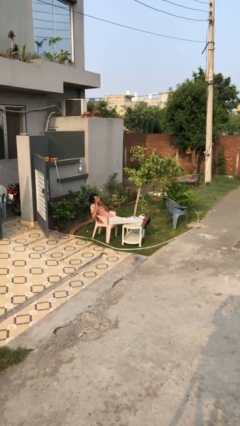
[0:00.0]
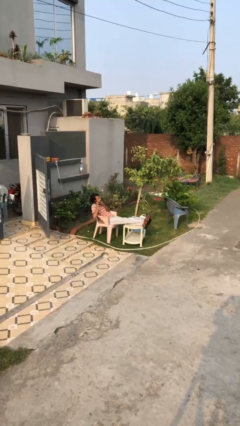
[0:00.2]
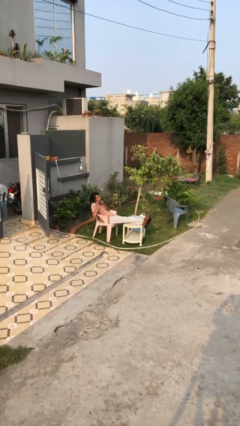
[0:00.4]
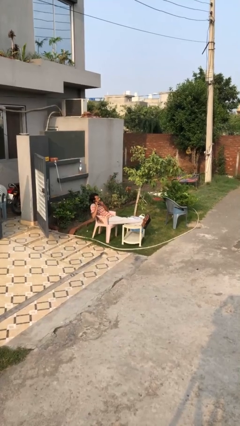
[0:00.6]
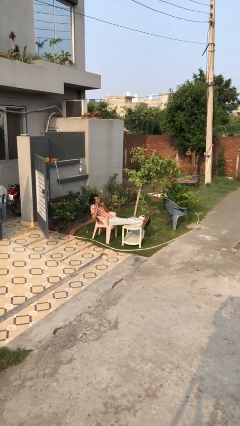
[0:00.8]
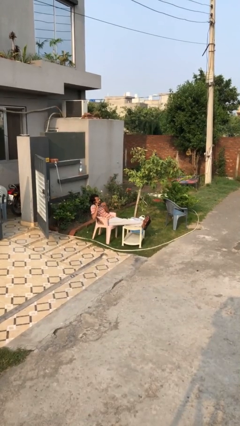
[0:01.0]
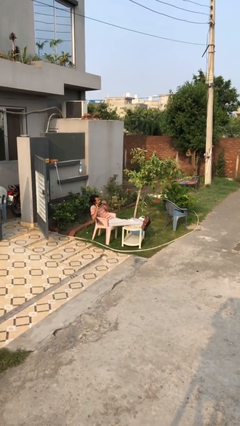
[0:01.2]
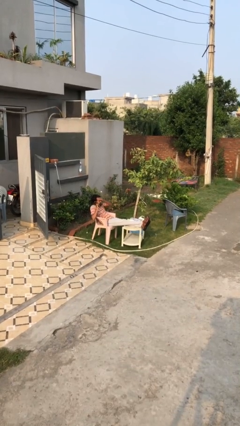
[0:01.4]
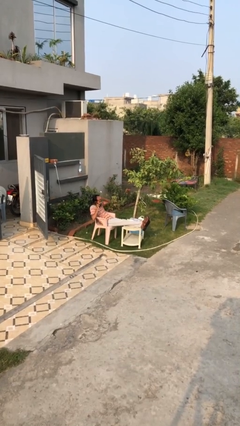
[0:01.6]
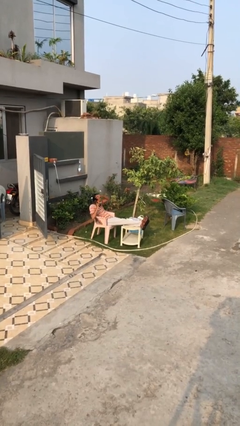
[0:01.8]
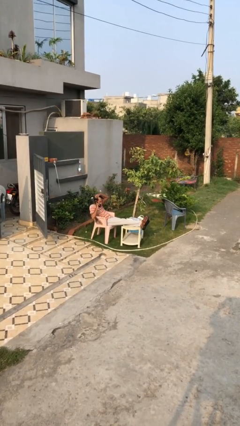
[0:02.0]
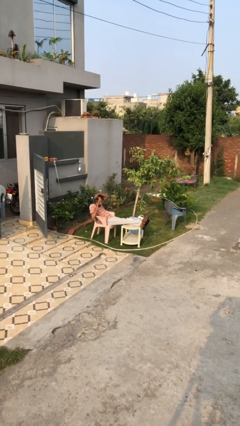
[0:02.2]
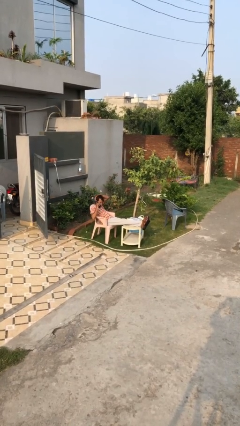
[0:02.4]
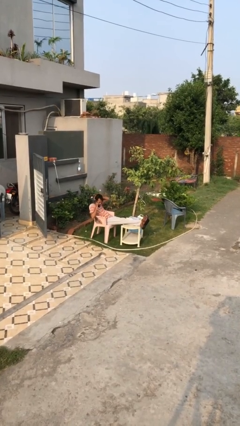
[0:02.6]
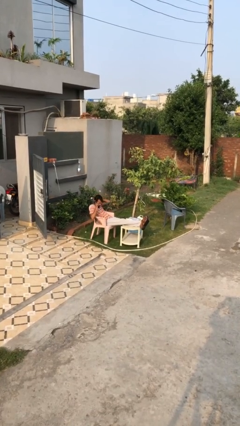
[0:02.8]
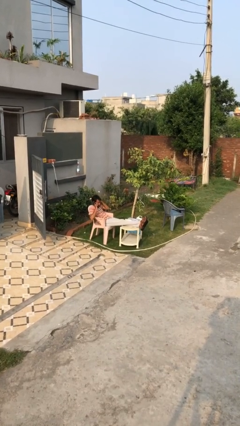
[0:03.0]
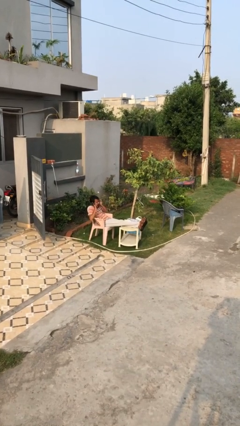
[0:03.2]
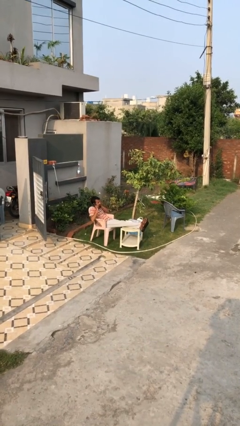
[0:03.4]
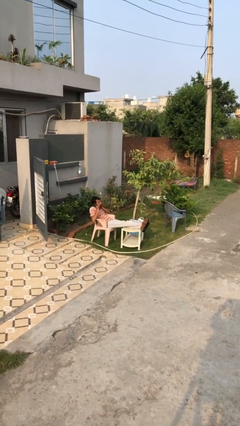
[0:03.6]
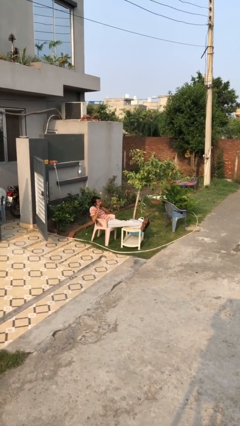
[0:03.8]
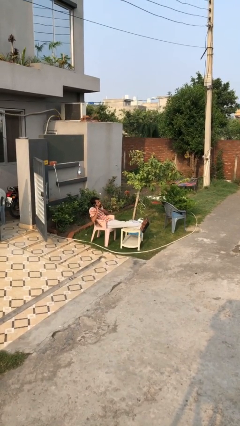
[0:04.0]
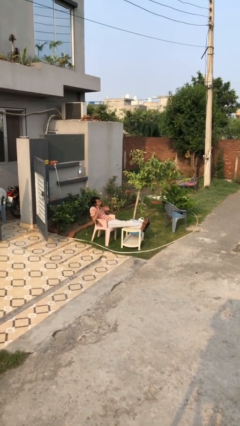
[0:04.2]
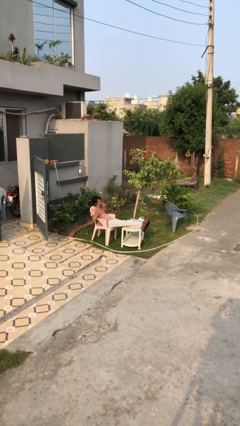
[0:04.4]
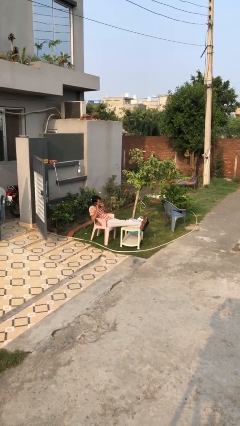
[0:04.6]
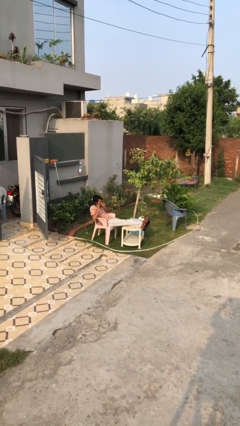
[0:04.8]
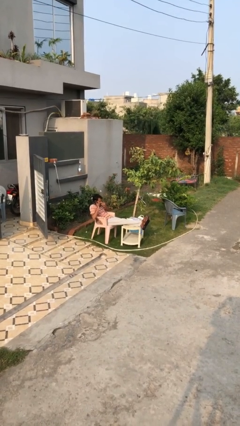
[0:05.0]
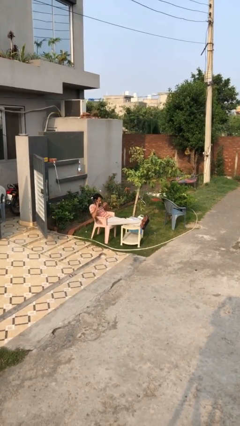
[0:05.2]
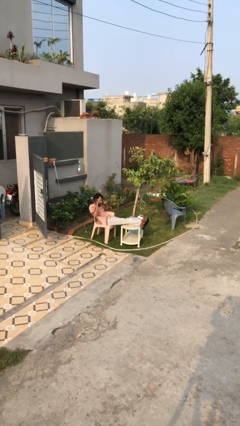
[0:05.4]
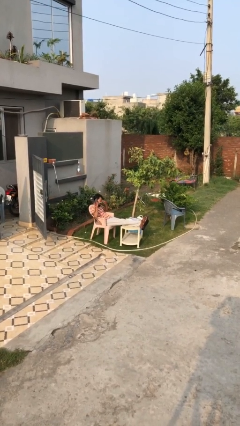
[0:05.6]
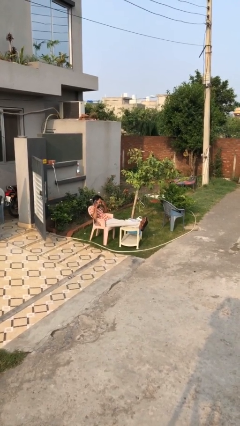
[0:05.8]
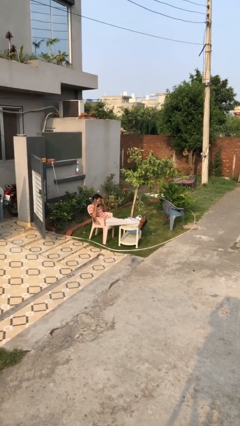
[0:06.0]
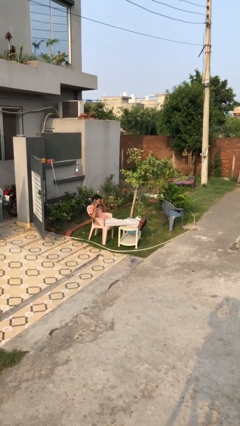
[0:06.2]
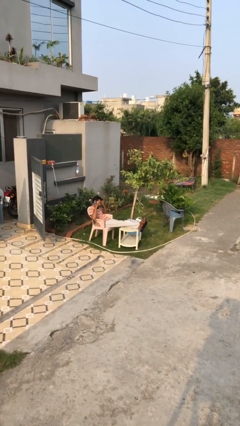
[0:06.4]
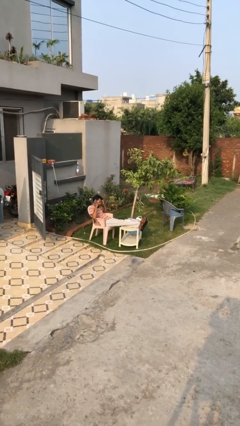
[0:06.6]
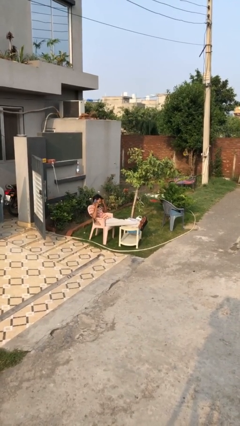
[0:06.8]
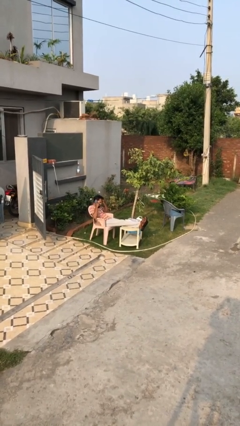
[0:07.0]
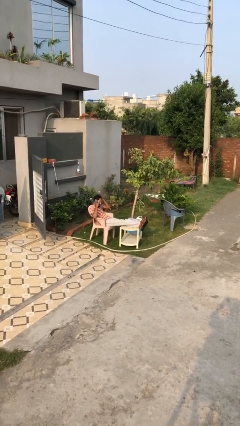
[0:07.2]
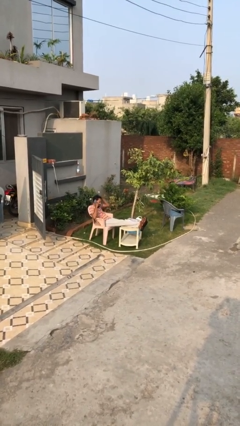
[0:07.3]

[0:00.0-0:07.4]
person talks on phone

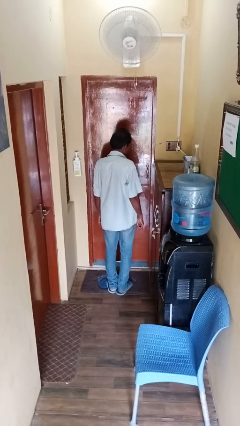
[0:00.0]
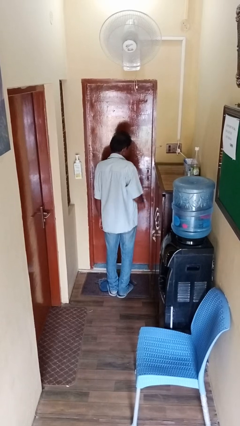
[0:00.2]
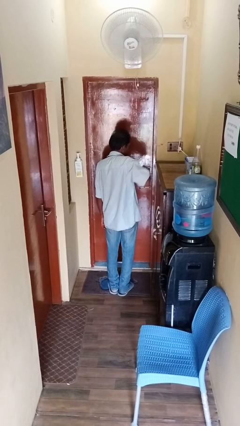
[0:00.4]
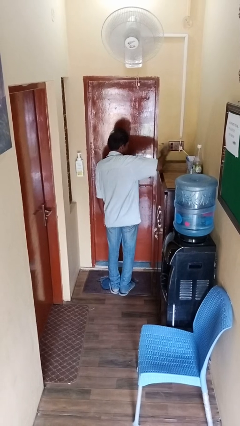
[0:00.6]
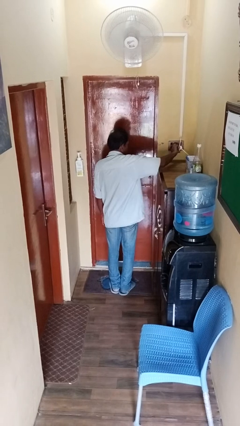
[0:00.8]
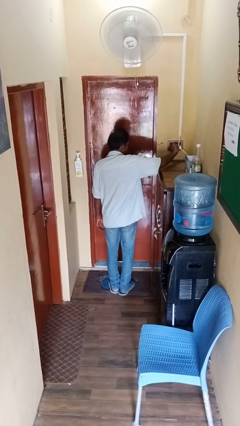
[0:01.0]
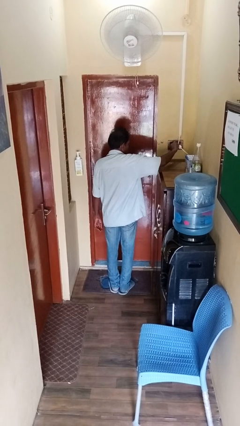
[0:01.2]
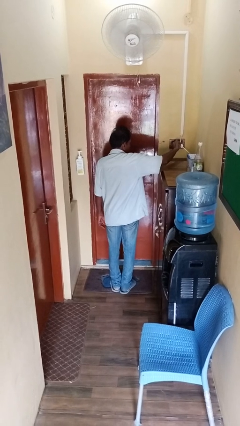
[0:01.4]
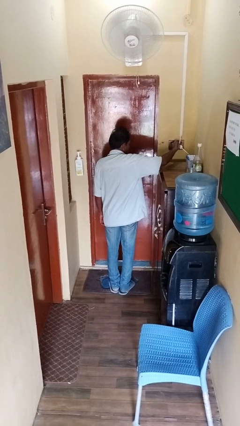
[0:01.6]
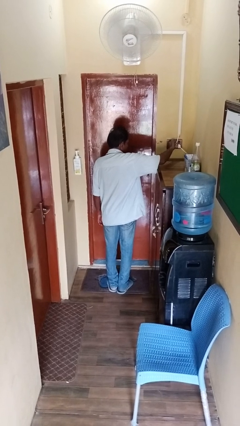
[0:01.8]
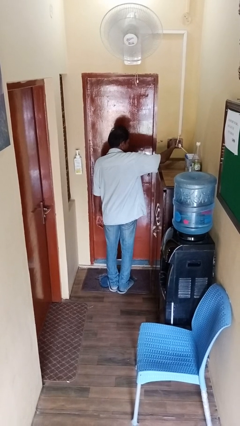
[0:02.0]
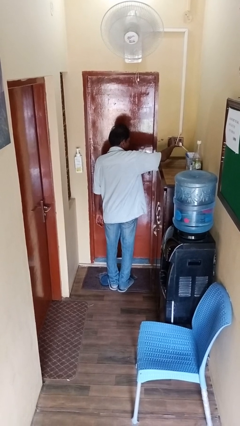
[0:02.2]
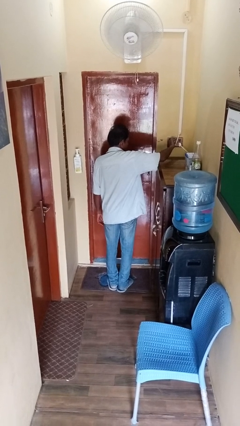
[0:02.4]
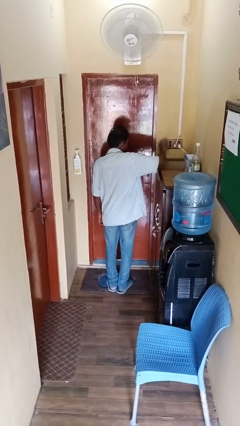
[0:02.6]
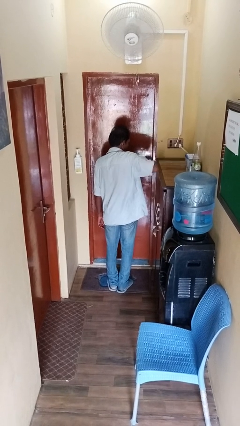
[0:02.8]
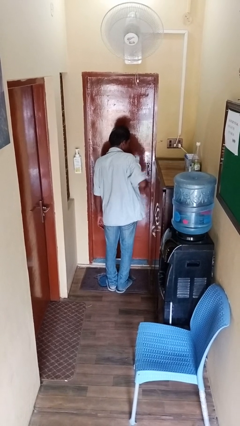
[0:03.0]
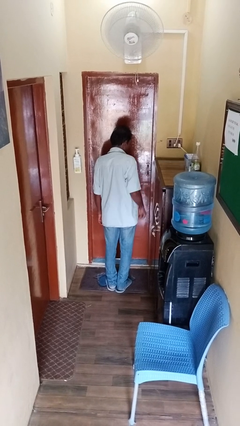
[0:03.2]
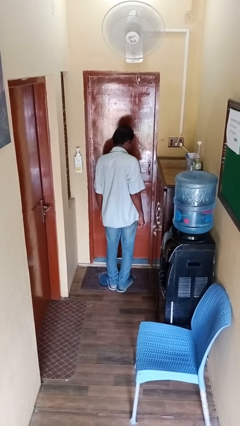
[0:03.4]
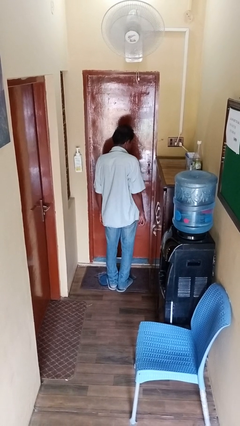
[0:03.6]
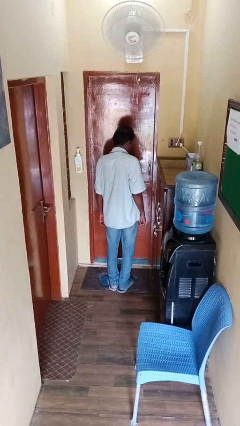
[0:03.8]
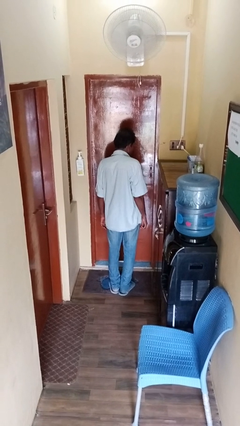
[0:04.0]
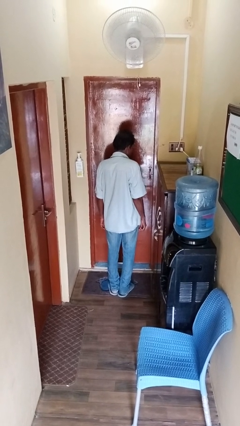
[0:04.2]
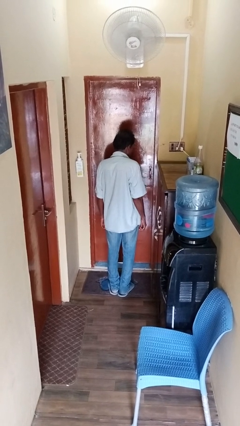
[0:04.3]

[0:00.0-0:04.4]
person turns on fan

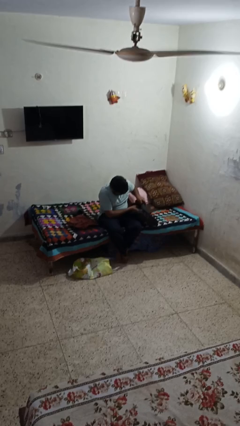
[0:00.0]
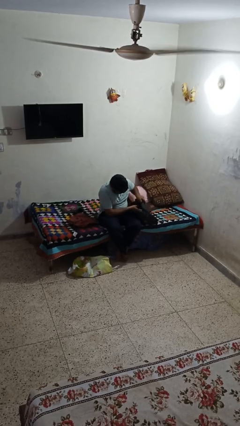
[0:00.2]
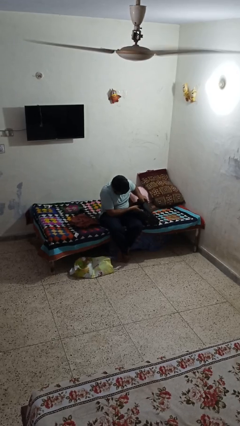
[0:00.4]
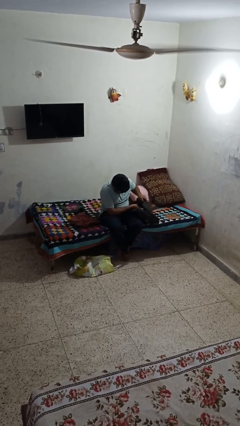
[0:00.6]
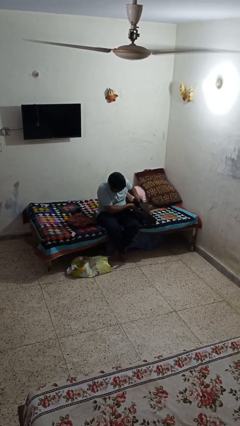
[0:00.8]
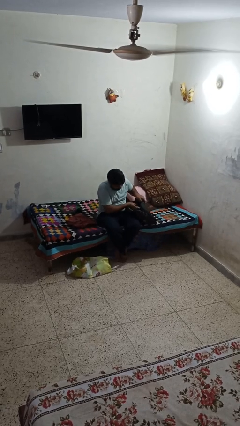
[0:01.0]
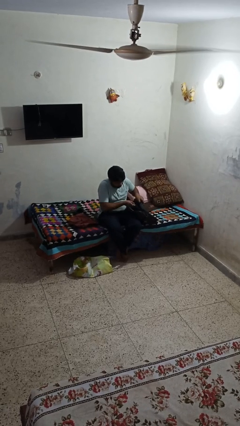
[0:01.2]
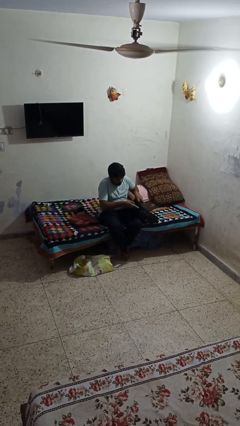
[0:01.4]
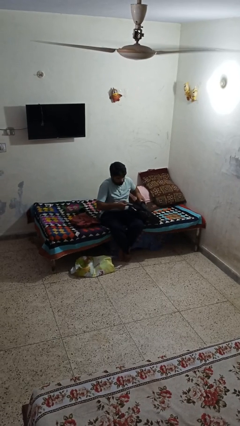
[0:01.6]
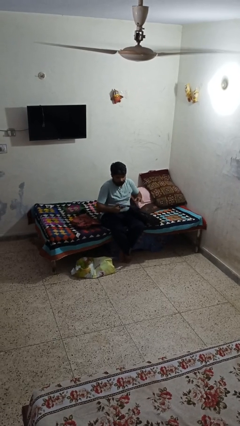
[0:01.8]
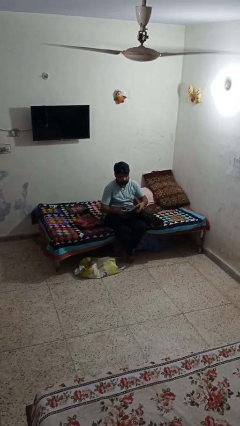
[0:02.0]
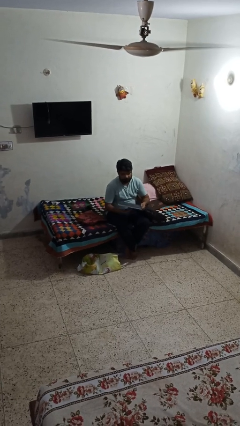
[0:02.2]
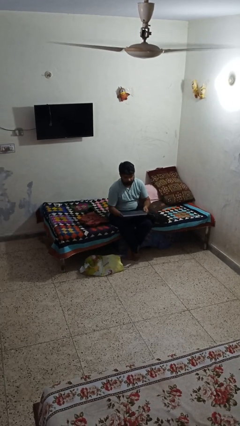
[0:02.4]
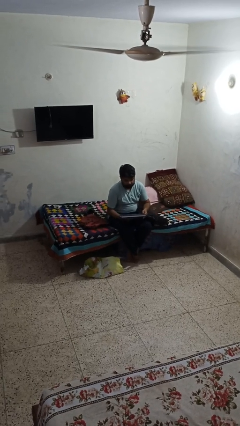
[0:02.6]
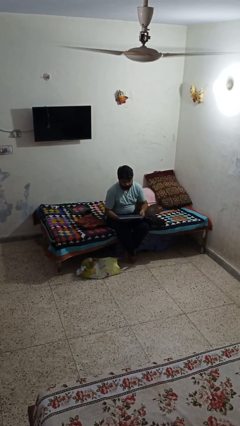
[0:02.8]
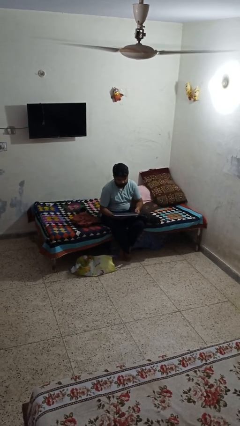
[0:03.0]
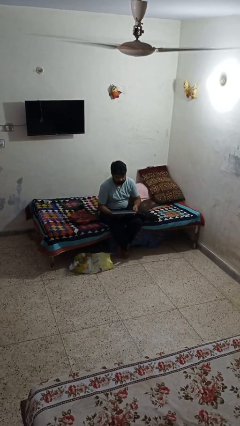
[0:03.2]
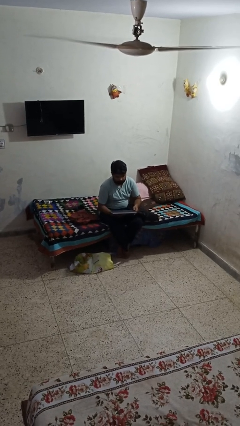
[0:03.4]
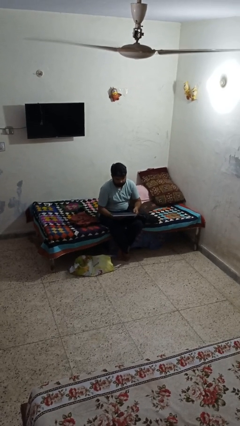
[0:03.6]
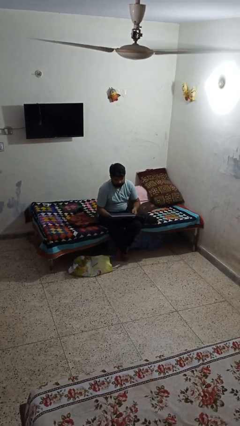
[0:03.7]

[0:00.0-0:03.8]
person takes object from backpack

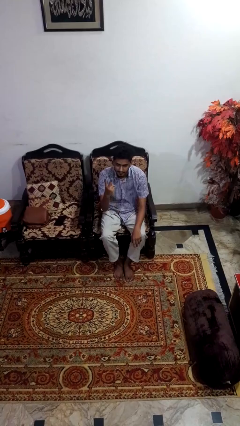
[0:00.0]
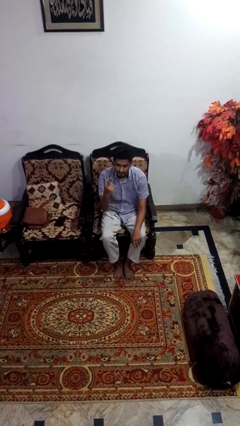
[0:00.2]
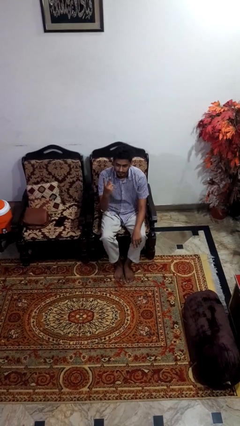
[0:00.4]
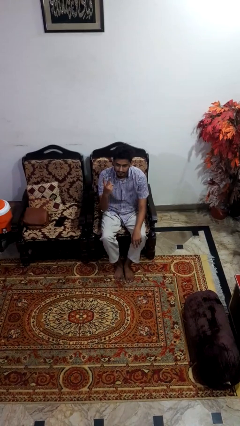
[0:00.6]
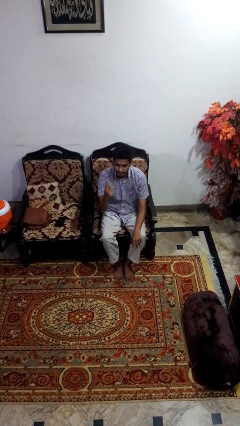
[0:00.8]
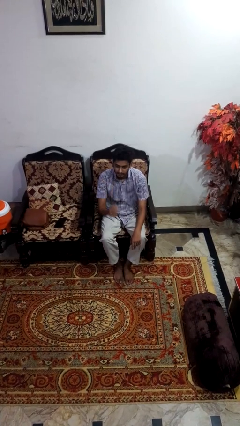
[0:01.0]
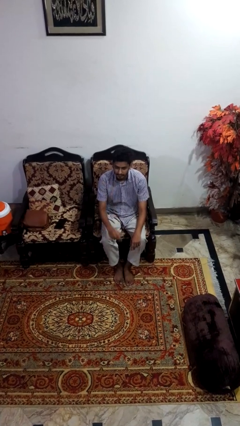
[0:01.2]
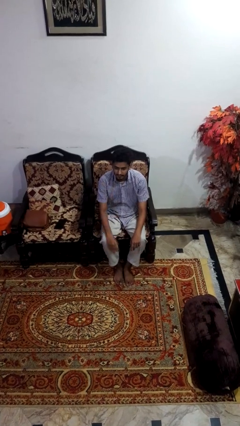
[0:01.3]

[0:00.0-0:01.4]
person gestures peace

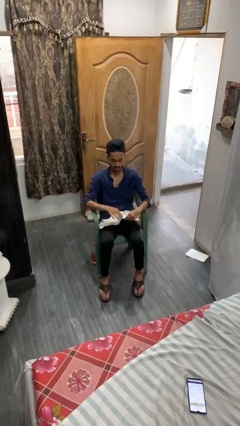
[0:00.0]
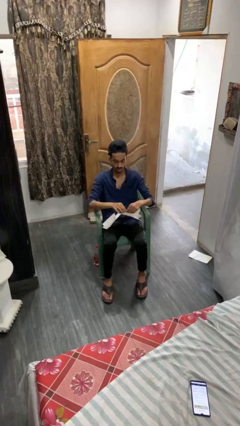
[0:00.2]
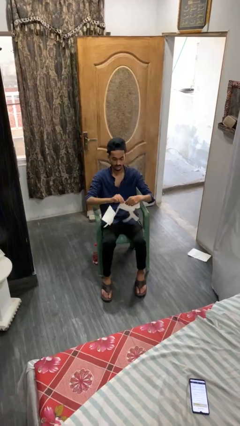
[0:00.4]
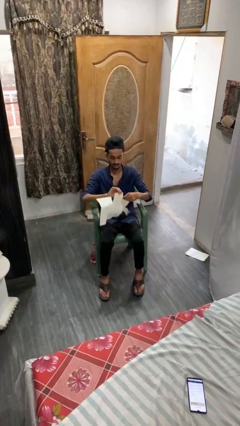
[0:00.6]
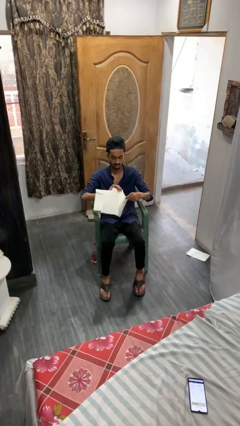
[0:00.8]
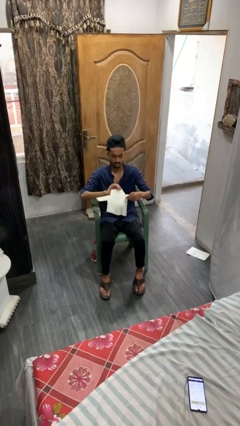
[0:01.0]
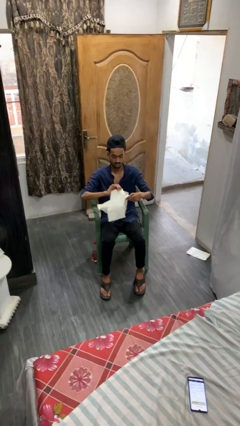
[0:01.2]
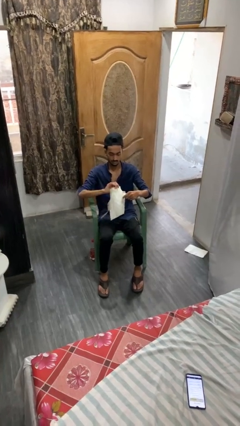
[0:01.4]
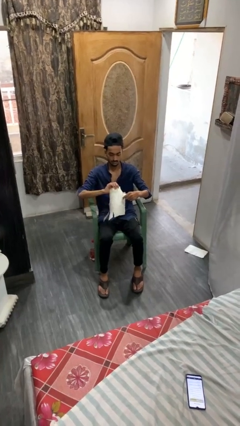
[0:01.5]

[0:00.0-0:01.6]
person tears paper
